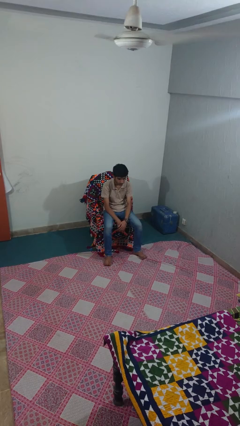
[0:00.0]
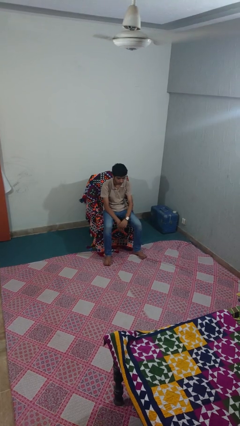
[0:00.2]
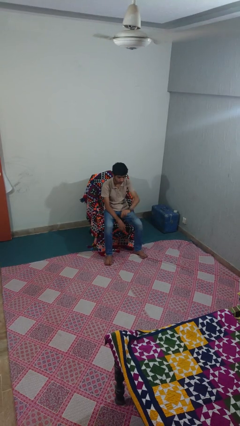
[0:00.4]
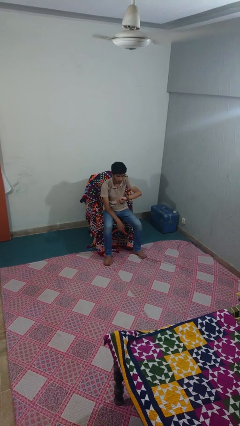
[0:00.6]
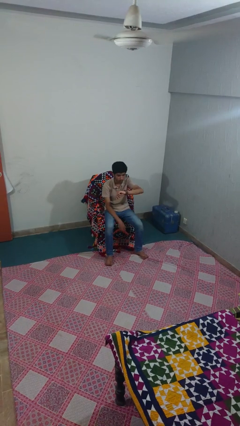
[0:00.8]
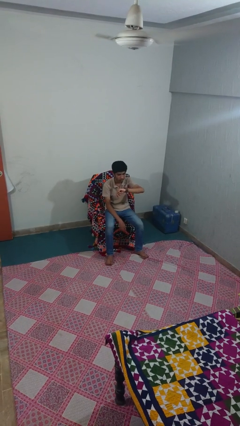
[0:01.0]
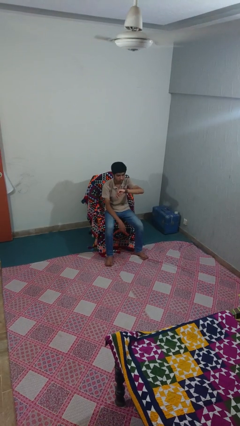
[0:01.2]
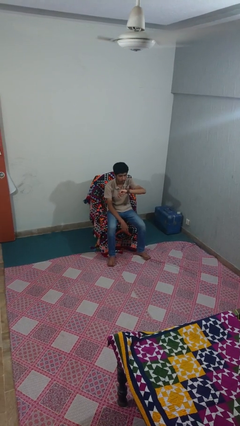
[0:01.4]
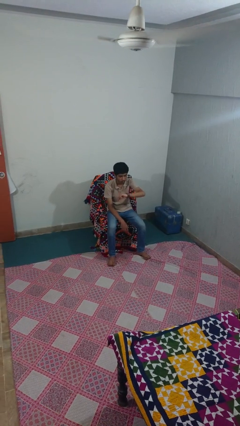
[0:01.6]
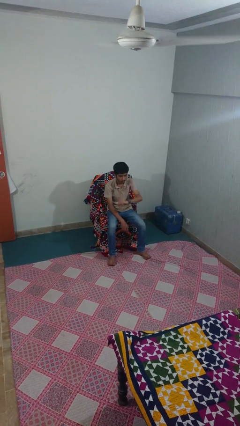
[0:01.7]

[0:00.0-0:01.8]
person looks at wristwatch

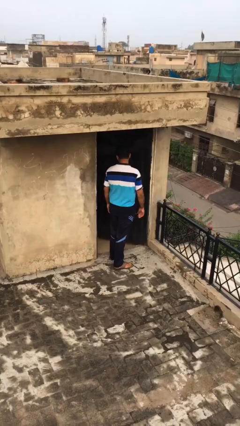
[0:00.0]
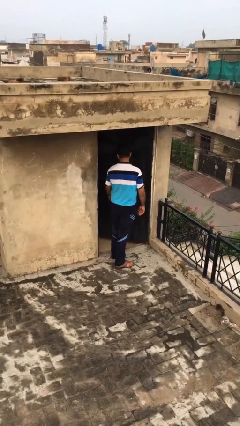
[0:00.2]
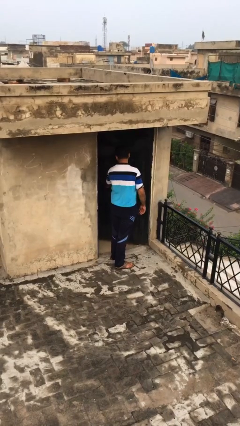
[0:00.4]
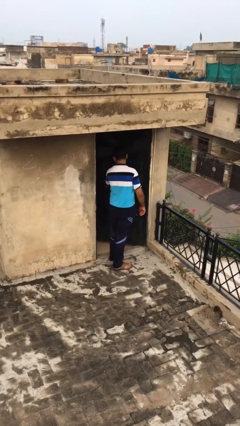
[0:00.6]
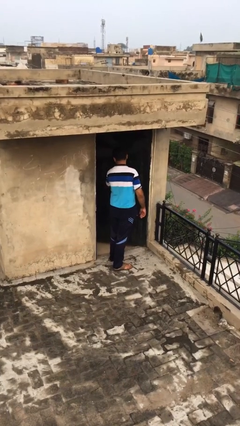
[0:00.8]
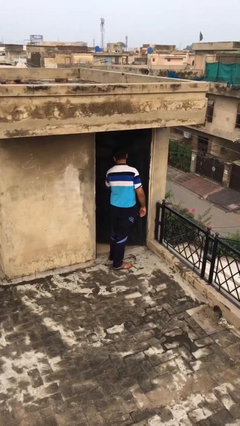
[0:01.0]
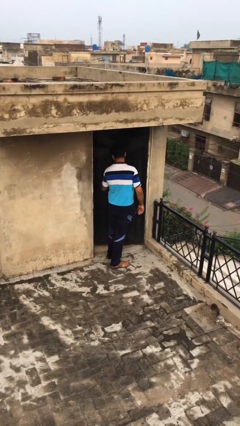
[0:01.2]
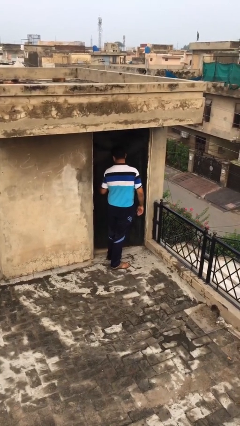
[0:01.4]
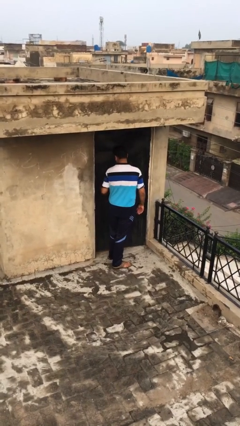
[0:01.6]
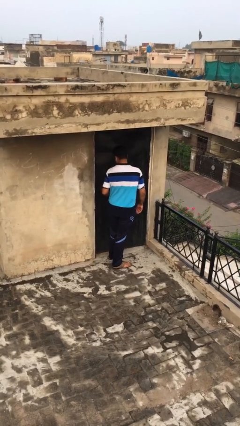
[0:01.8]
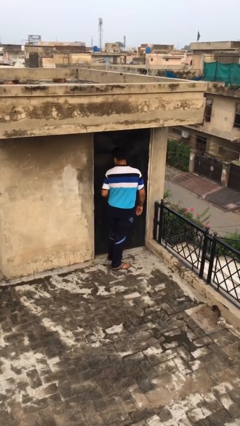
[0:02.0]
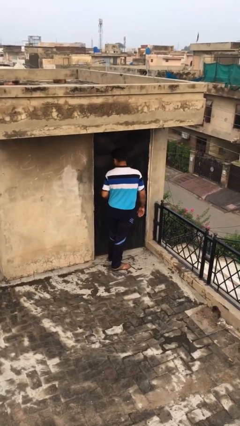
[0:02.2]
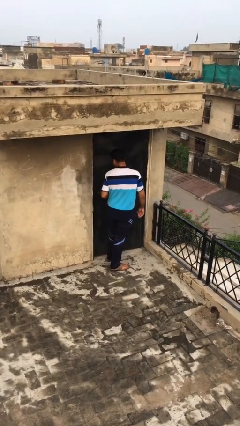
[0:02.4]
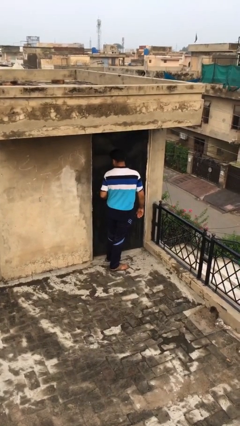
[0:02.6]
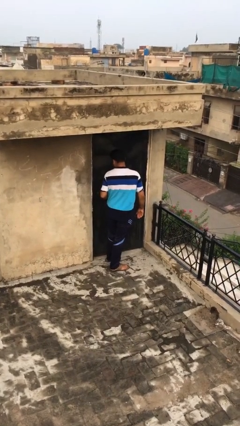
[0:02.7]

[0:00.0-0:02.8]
person closes facility door

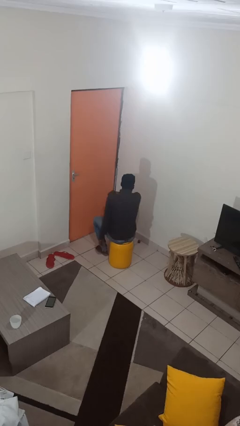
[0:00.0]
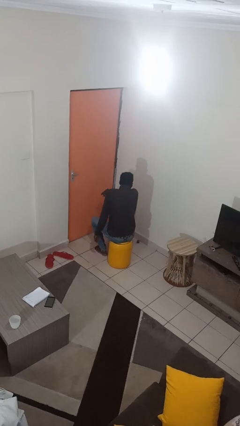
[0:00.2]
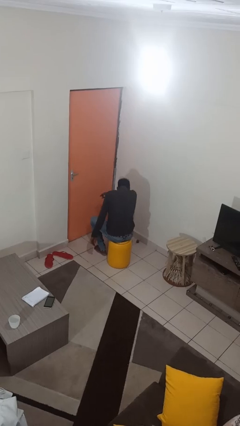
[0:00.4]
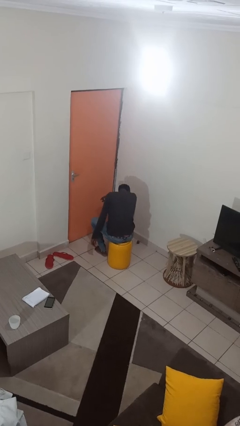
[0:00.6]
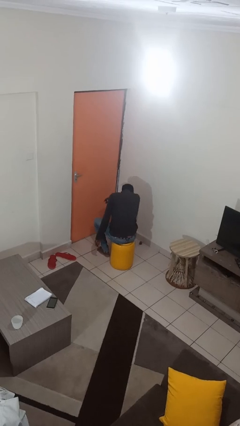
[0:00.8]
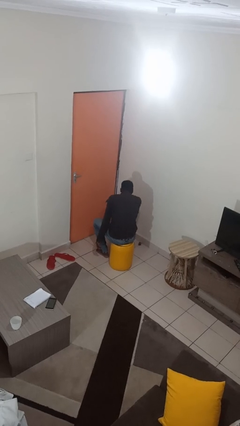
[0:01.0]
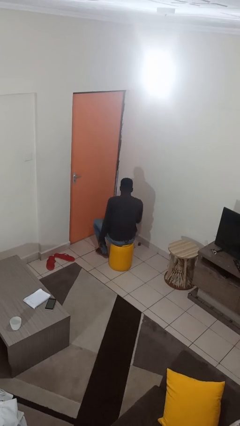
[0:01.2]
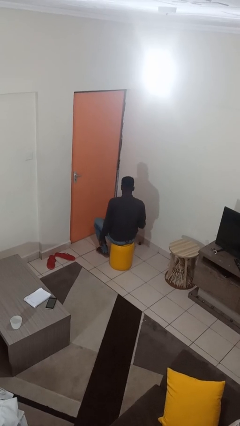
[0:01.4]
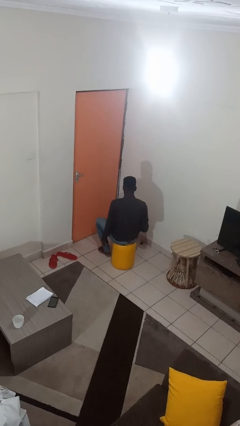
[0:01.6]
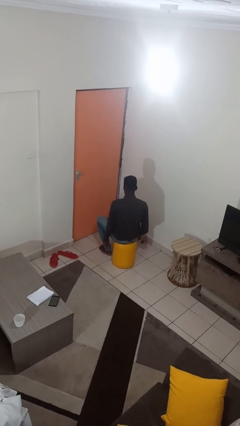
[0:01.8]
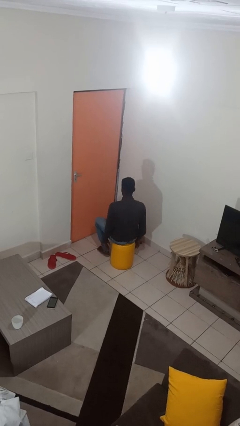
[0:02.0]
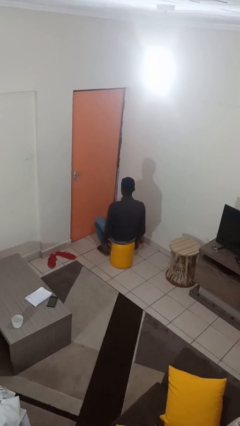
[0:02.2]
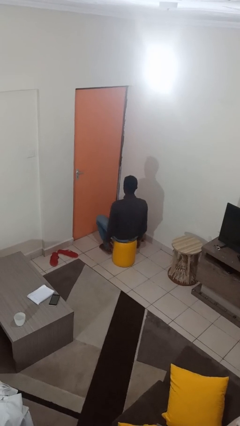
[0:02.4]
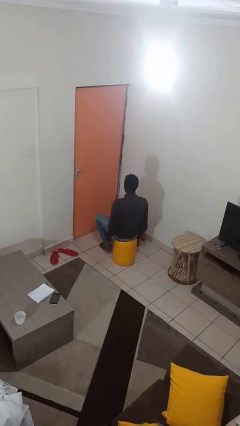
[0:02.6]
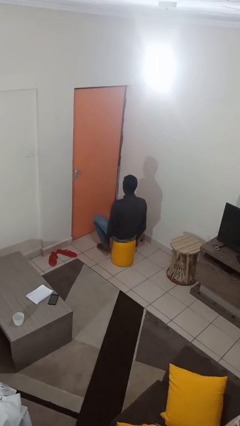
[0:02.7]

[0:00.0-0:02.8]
person sneezes into arm

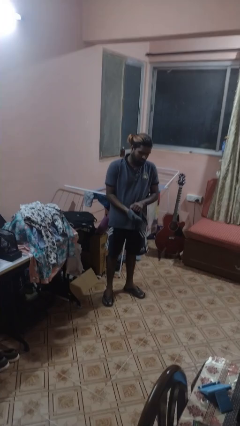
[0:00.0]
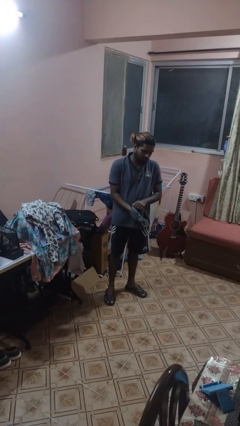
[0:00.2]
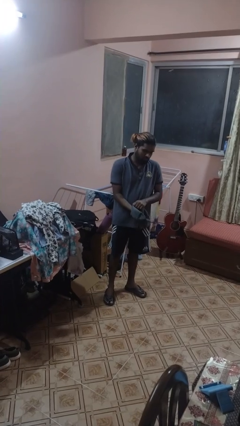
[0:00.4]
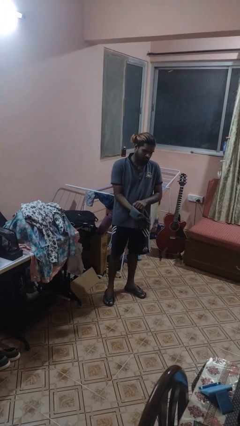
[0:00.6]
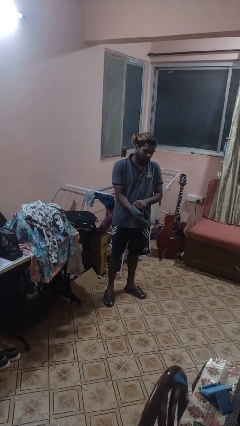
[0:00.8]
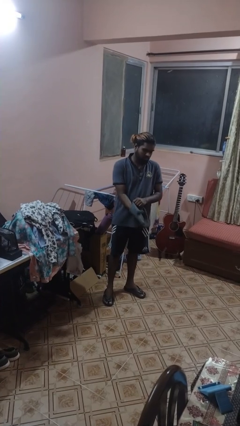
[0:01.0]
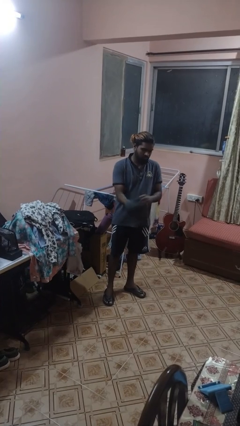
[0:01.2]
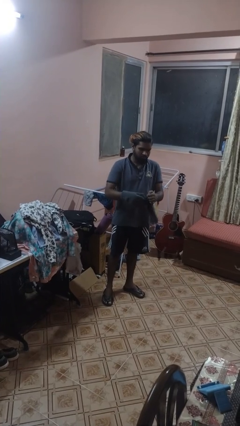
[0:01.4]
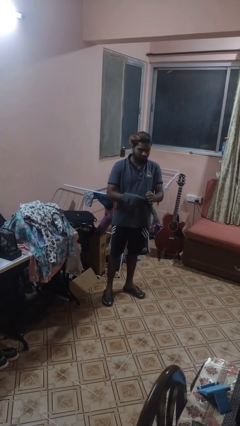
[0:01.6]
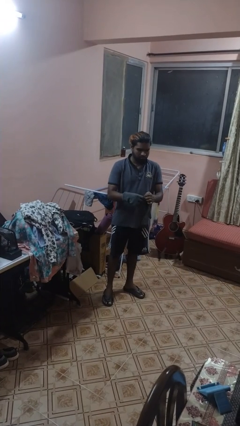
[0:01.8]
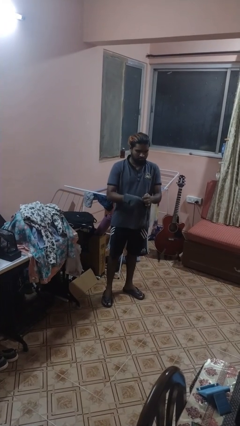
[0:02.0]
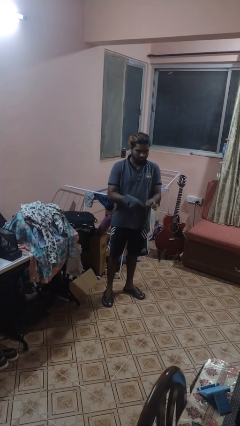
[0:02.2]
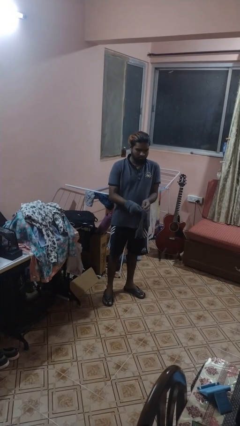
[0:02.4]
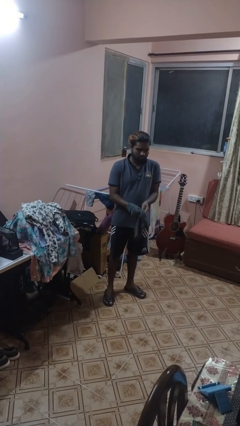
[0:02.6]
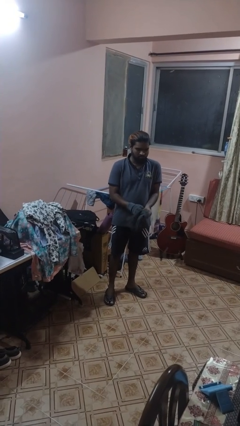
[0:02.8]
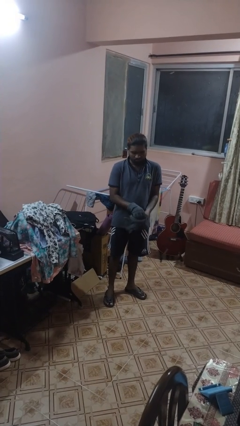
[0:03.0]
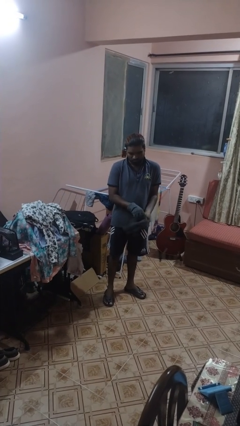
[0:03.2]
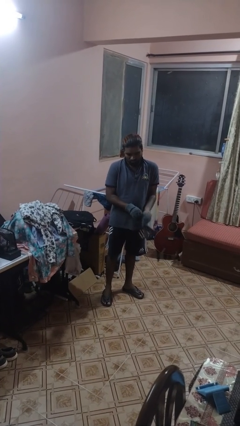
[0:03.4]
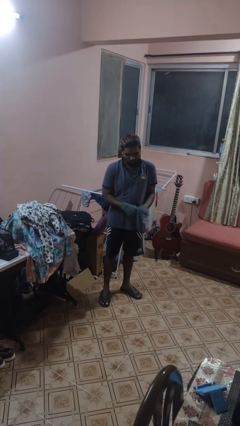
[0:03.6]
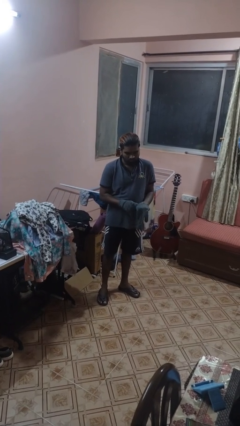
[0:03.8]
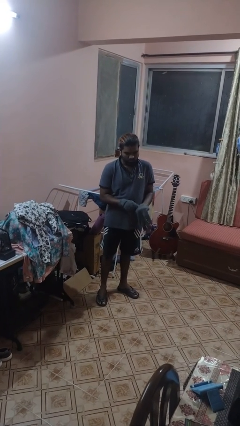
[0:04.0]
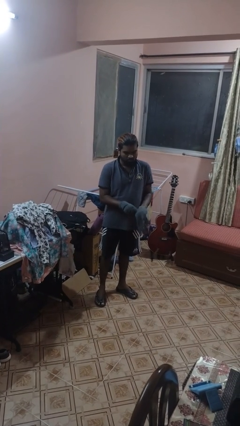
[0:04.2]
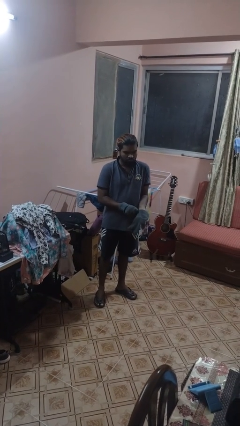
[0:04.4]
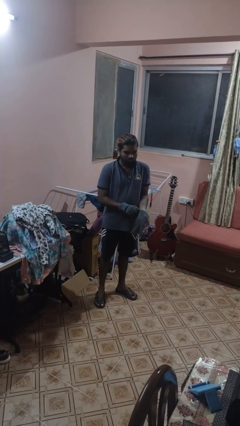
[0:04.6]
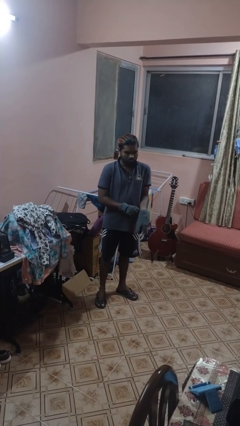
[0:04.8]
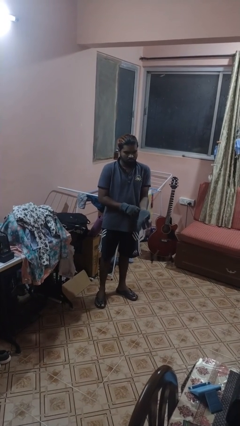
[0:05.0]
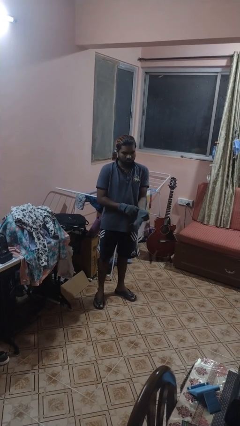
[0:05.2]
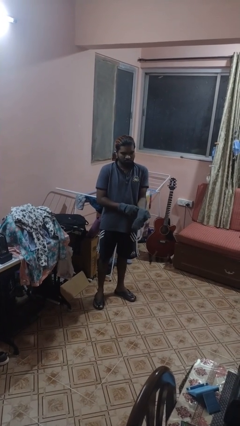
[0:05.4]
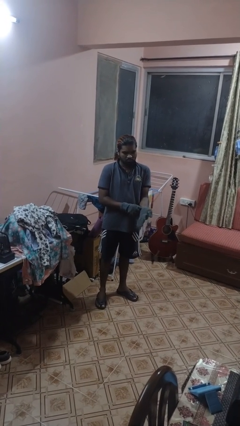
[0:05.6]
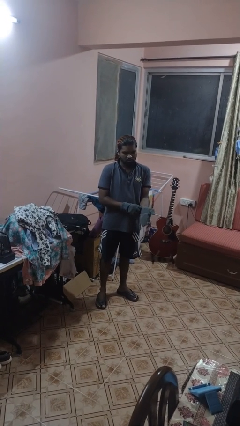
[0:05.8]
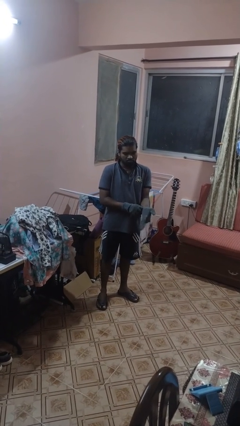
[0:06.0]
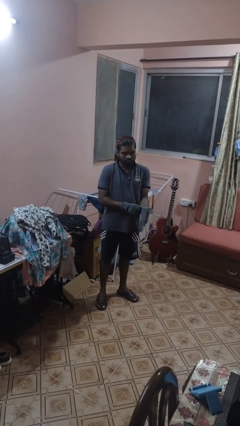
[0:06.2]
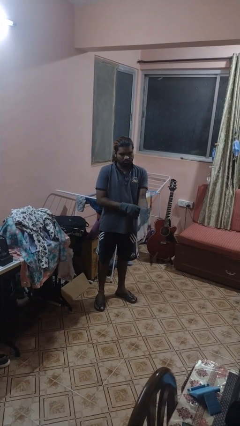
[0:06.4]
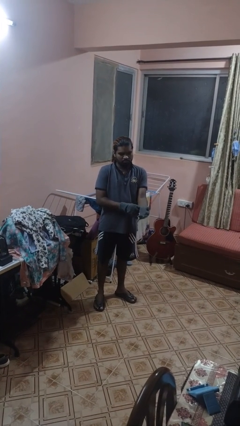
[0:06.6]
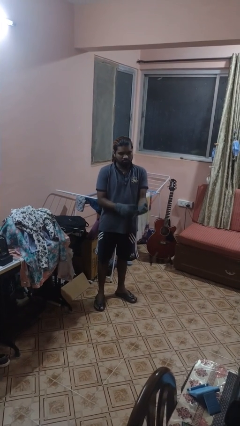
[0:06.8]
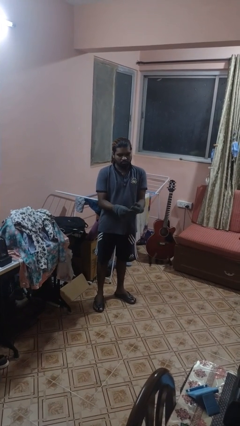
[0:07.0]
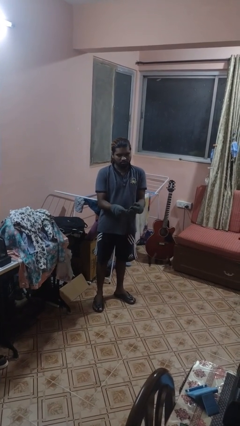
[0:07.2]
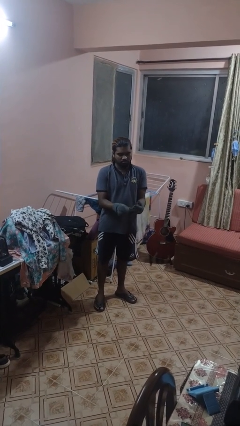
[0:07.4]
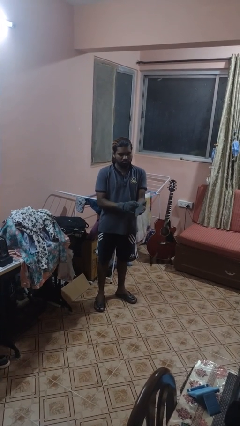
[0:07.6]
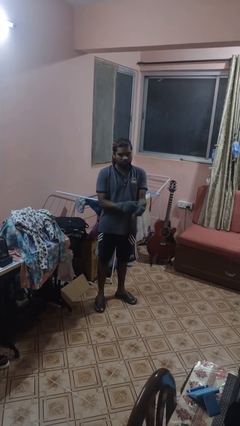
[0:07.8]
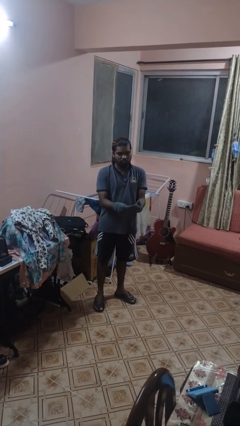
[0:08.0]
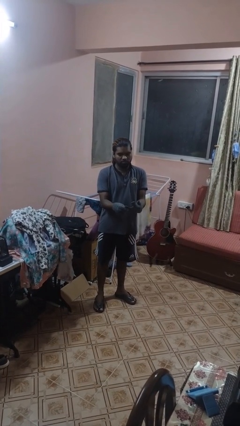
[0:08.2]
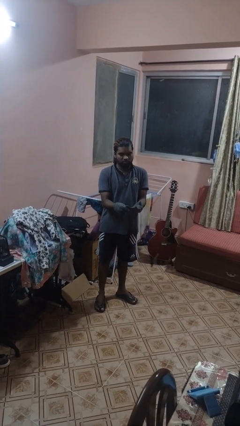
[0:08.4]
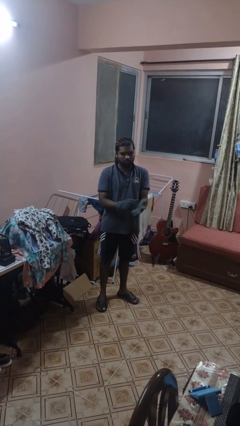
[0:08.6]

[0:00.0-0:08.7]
person puts on gloves

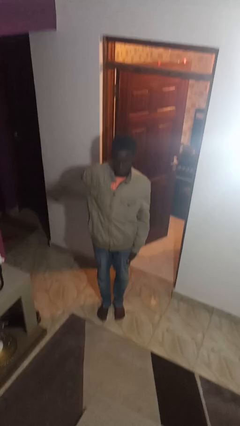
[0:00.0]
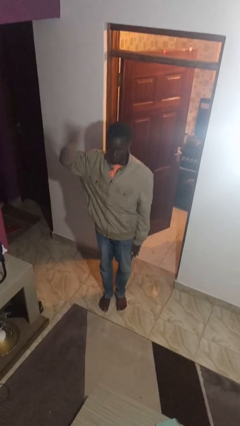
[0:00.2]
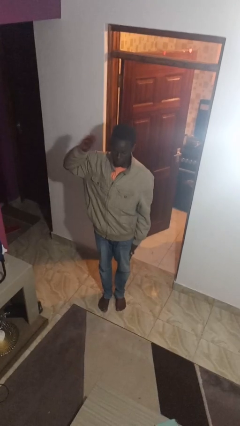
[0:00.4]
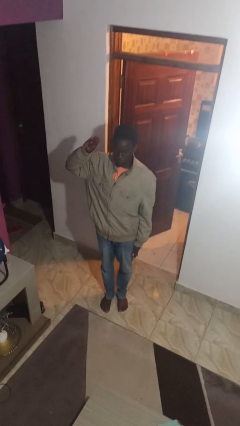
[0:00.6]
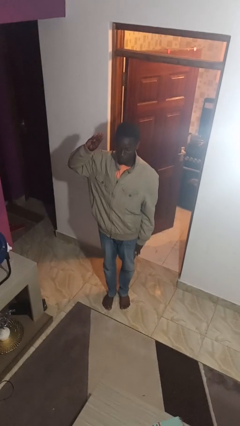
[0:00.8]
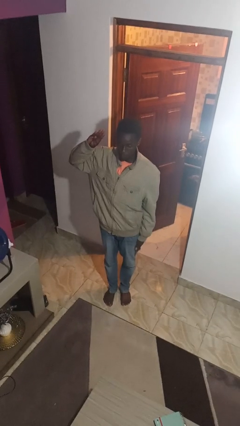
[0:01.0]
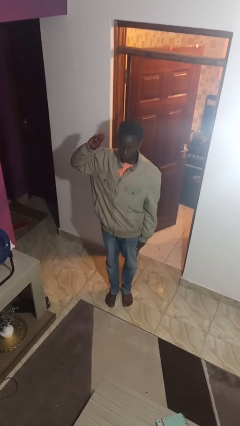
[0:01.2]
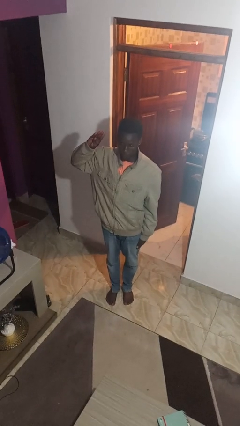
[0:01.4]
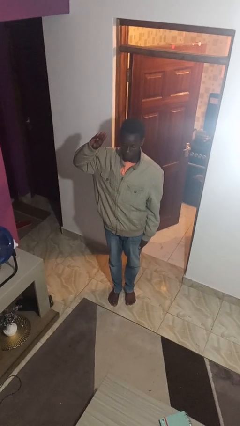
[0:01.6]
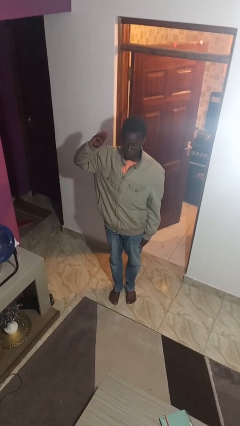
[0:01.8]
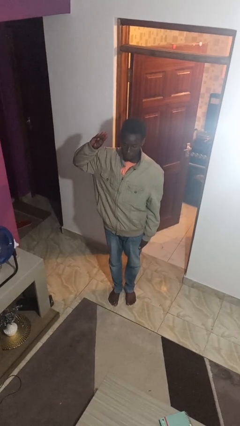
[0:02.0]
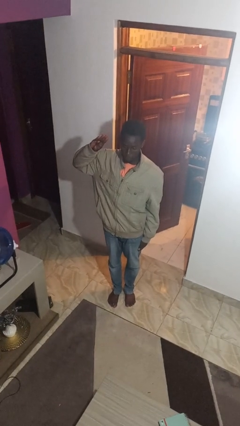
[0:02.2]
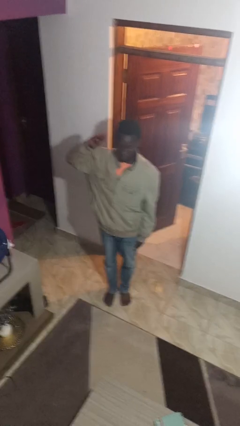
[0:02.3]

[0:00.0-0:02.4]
person salutes
